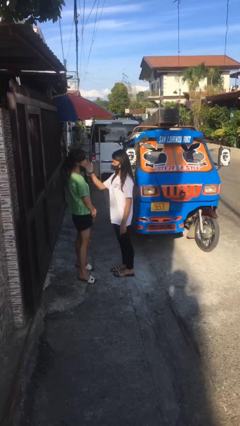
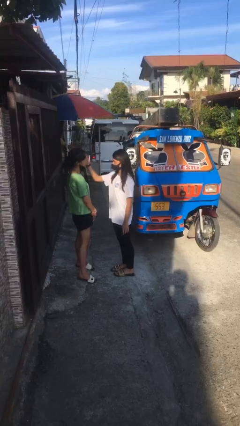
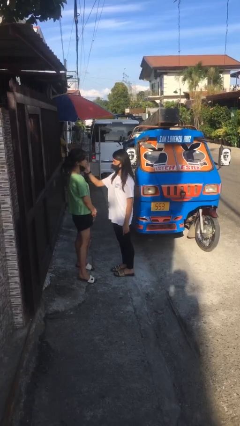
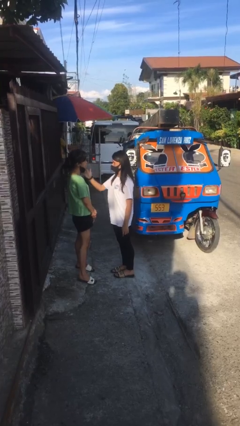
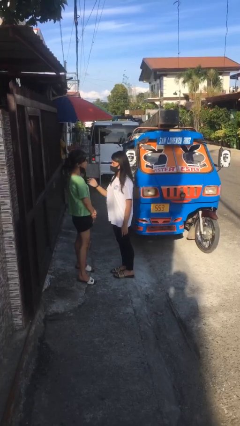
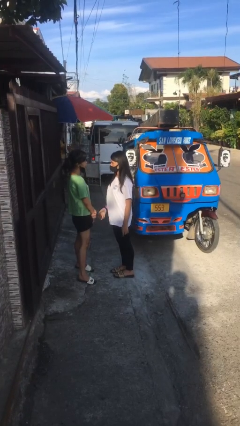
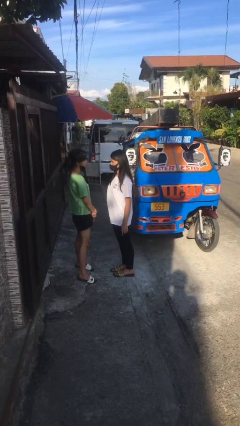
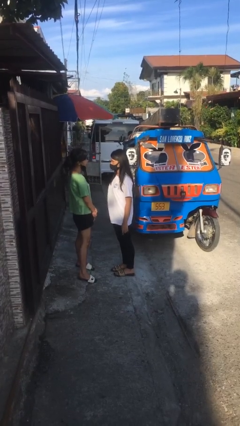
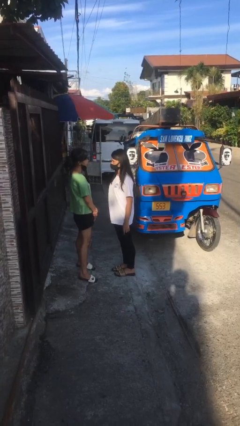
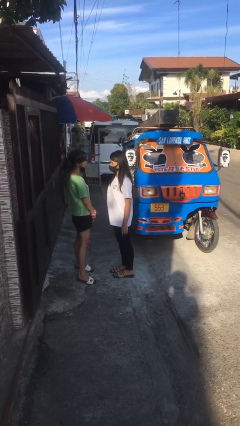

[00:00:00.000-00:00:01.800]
person touches face of person

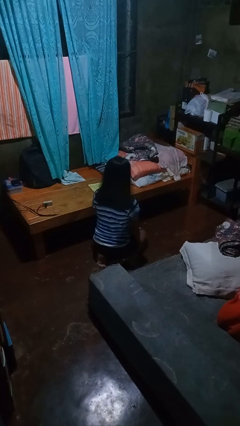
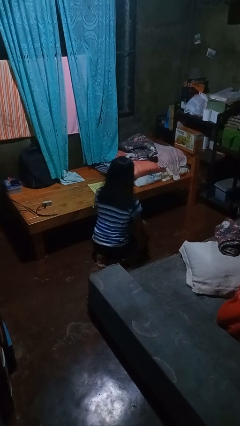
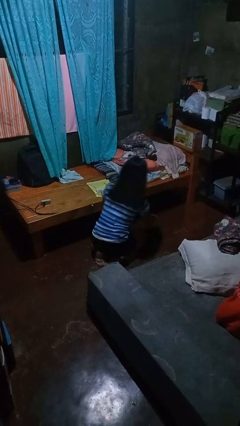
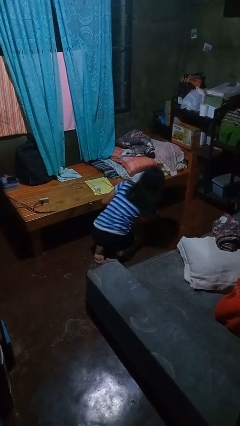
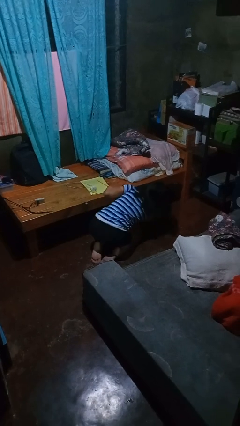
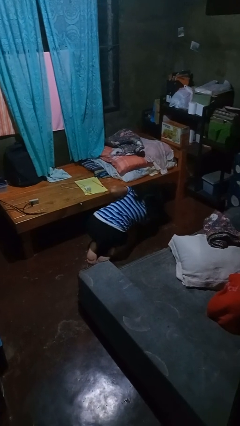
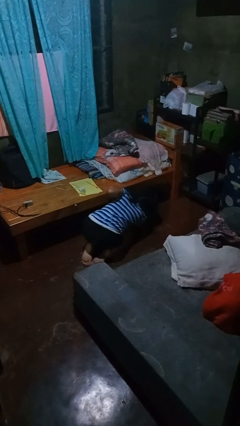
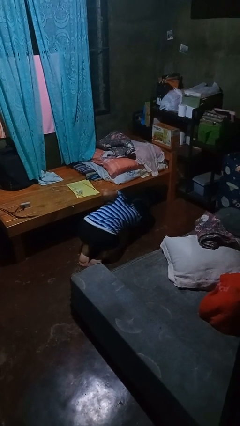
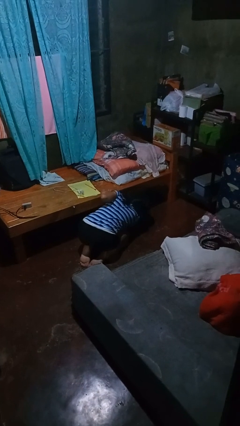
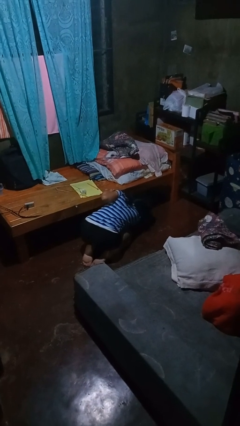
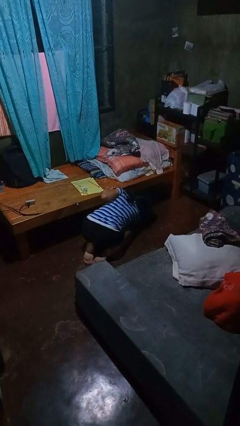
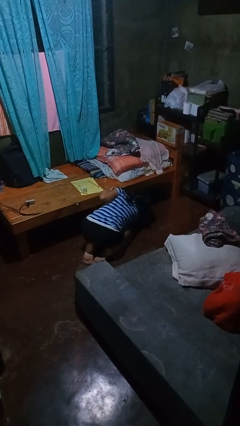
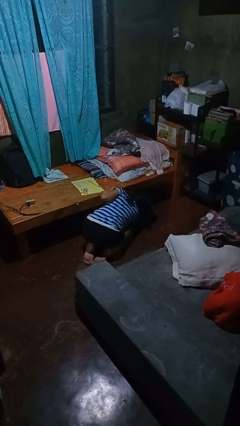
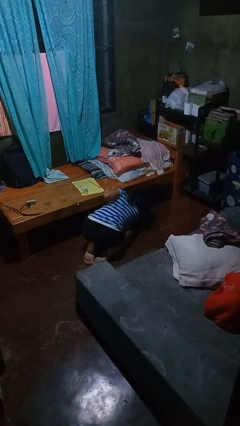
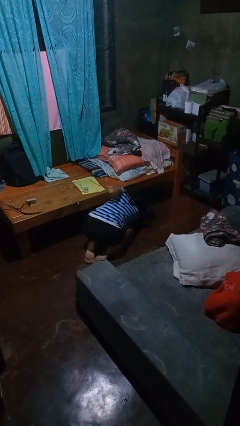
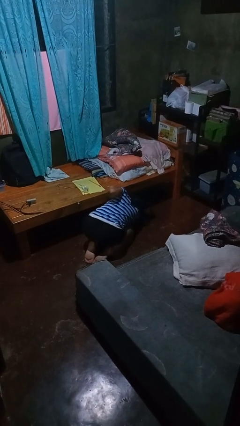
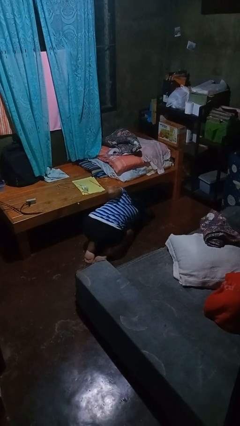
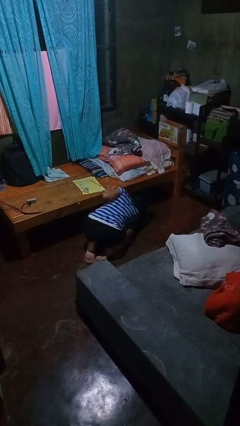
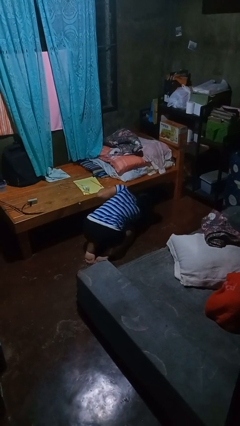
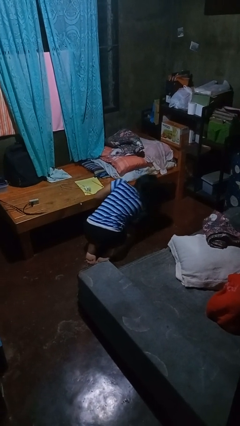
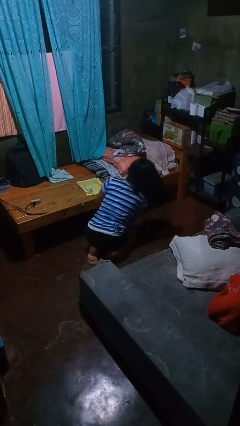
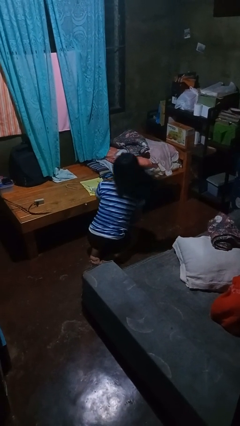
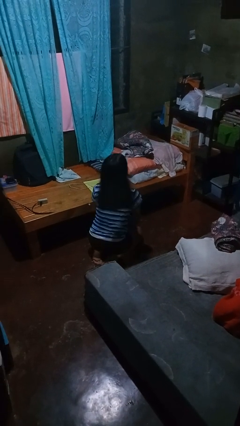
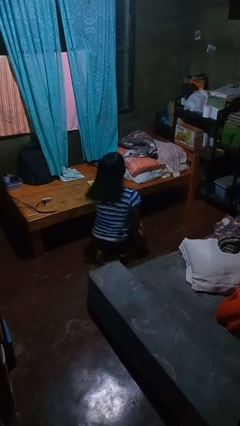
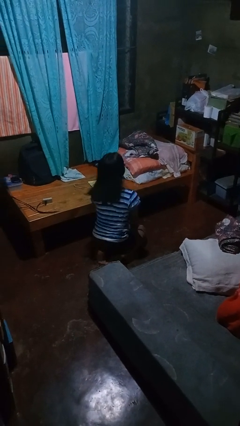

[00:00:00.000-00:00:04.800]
person searches under bed

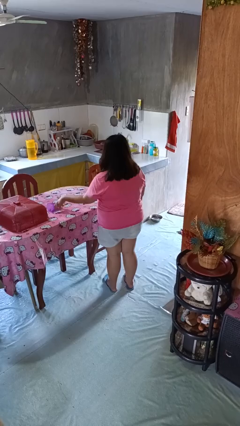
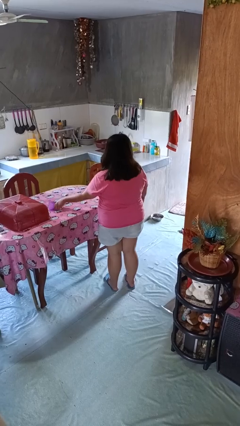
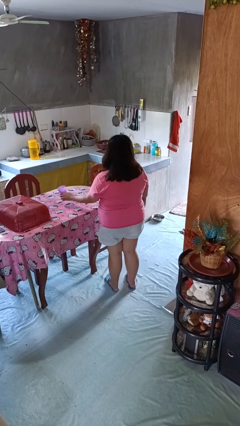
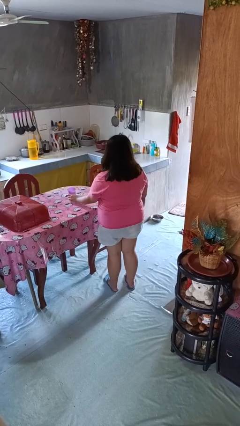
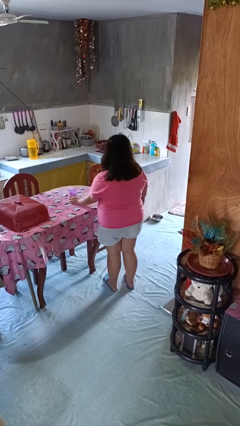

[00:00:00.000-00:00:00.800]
person sets upright glass

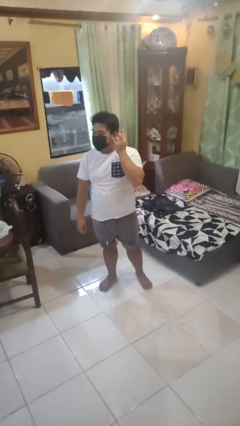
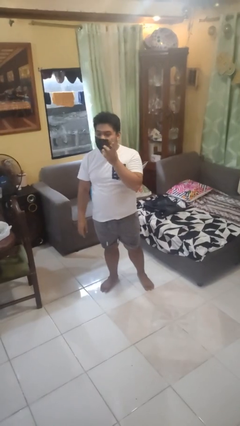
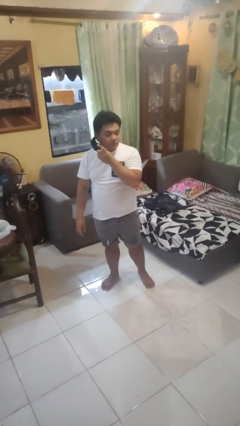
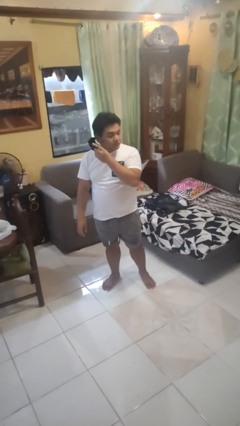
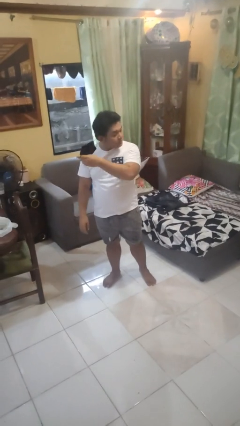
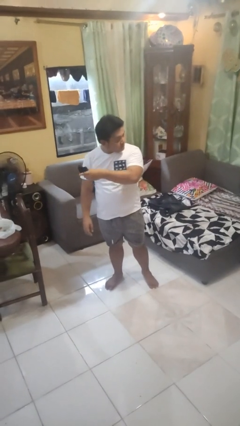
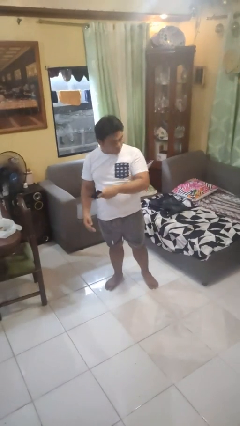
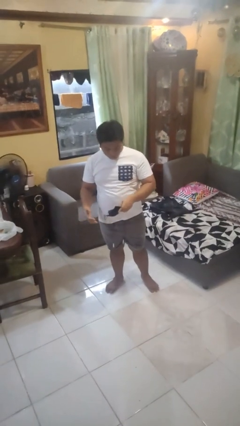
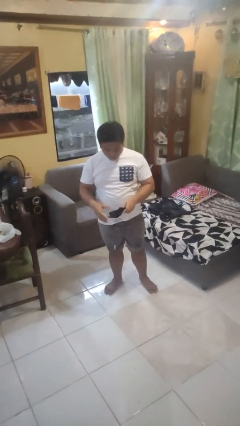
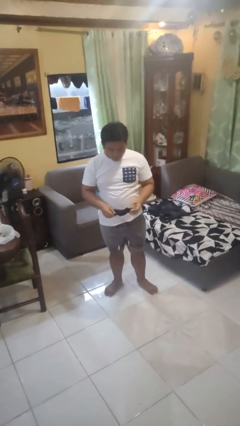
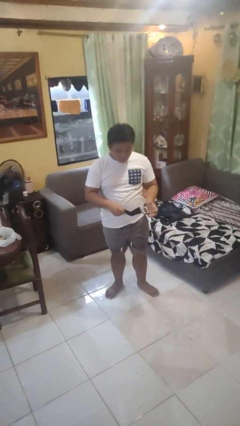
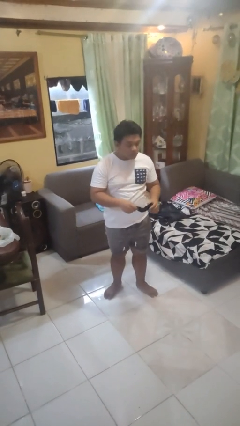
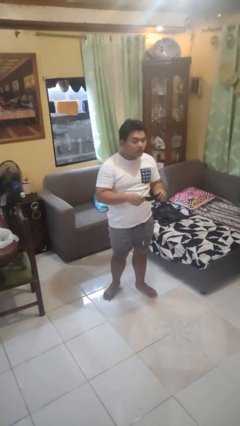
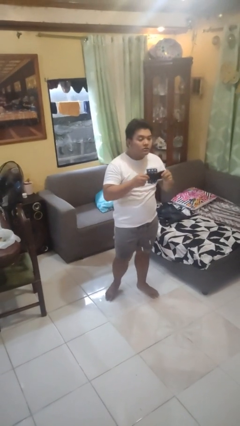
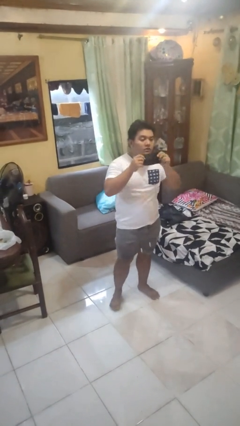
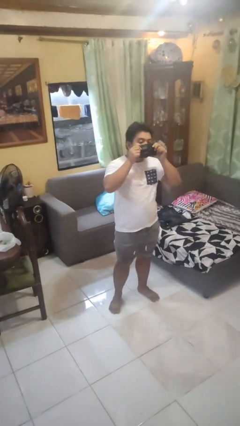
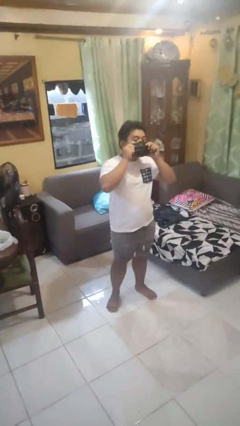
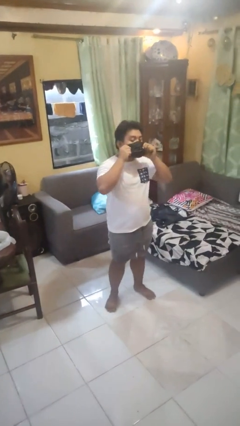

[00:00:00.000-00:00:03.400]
person takes off facemask

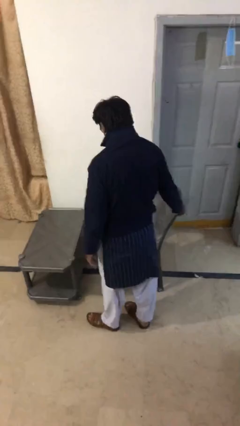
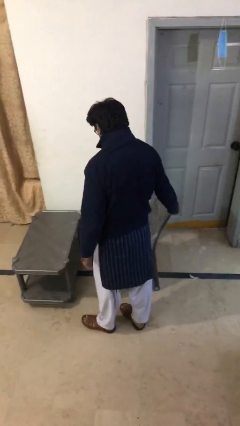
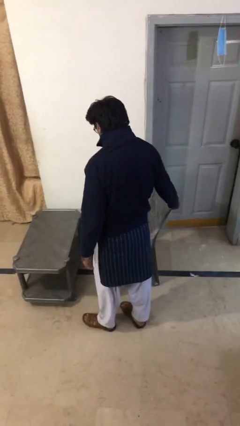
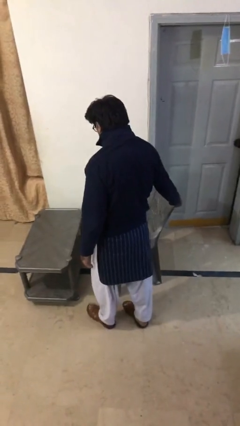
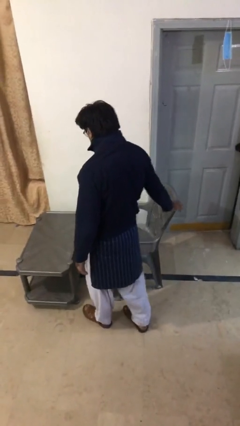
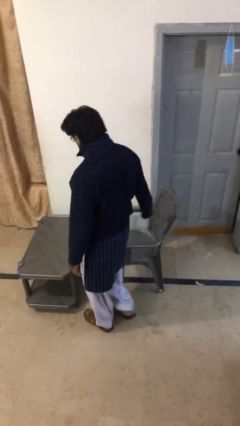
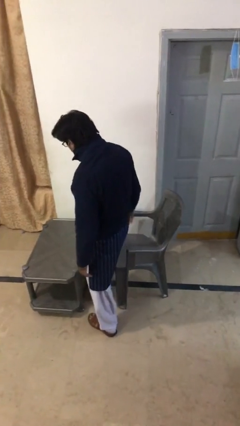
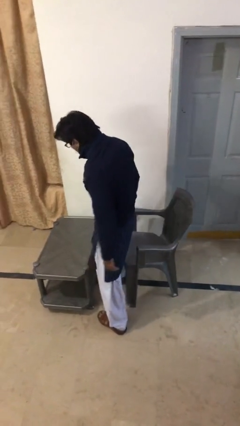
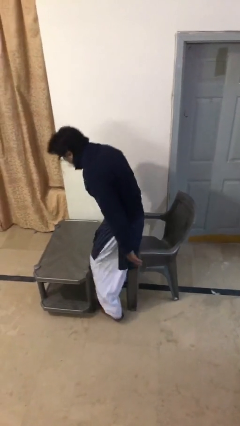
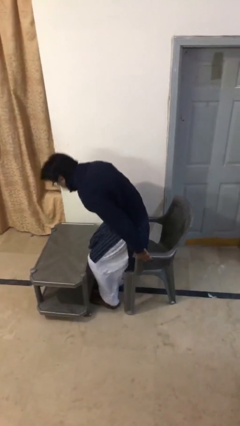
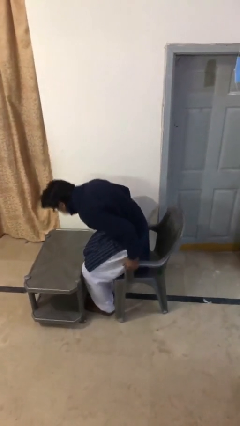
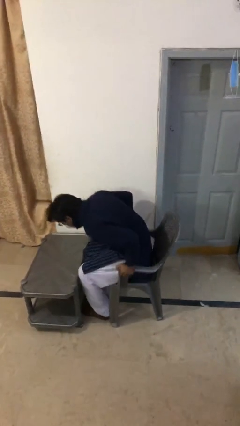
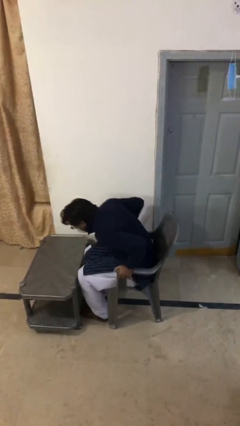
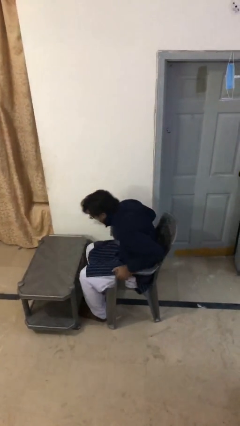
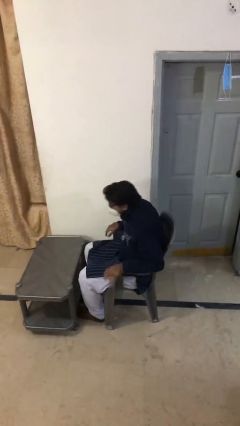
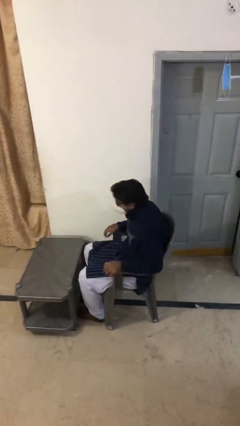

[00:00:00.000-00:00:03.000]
person sits down

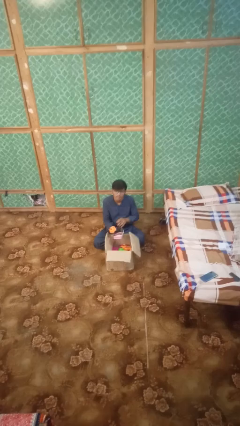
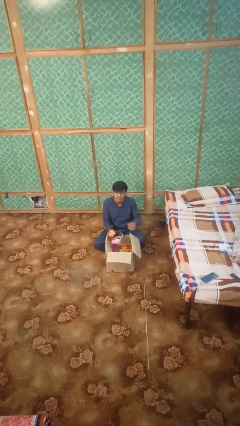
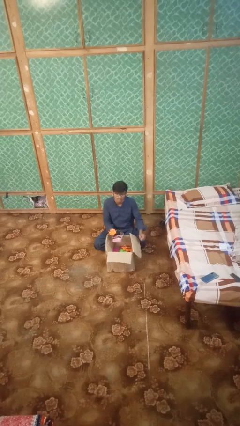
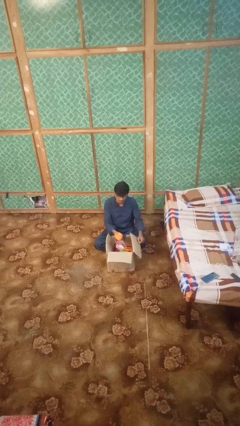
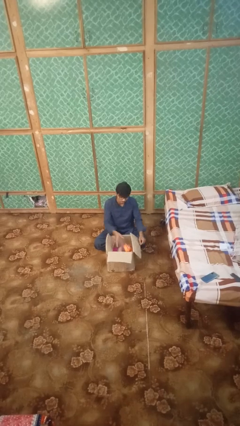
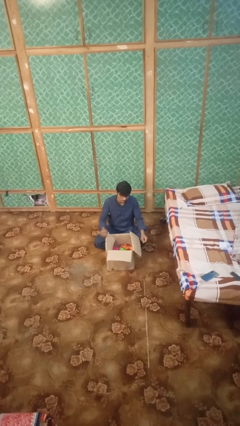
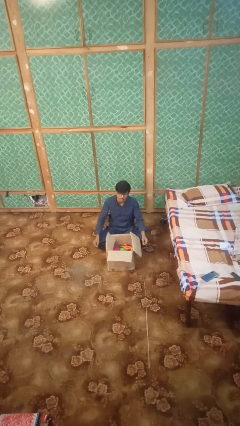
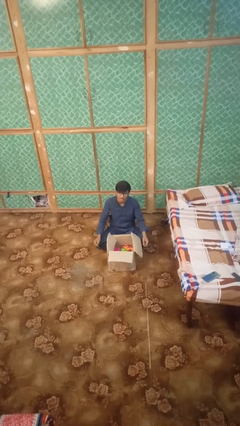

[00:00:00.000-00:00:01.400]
person puts object into box

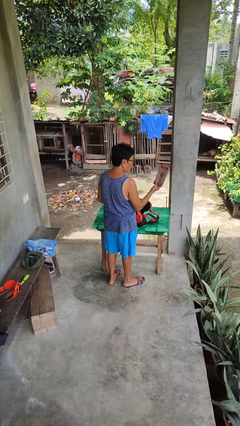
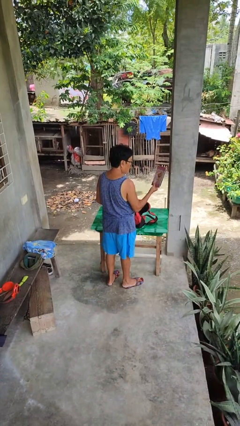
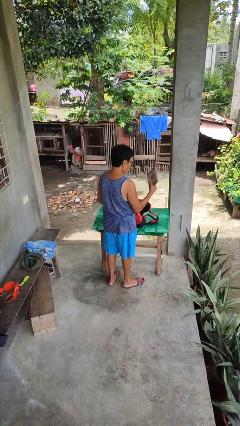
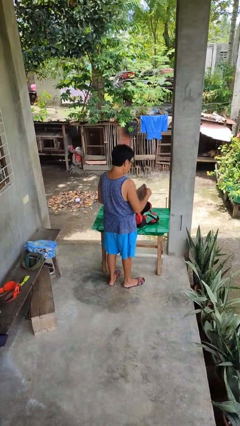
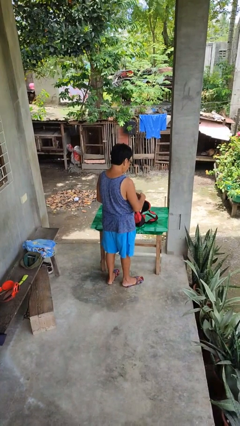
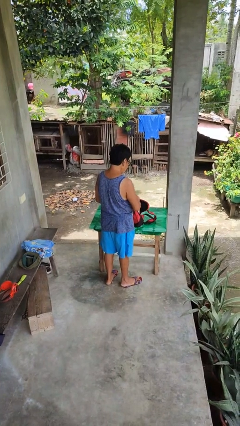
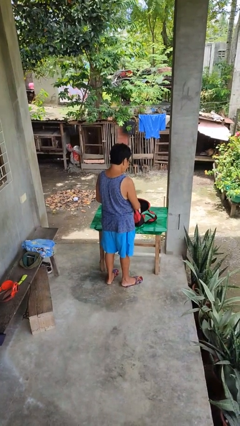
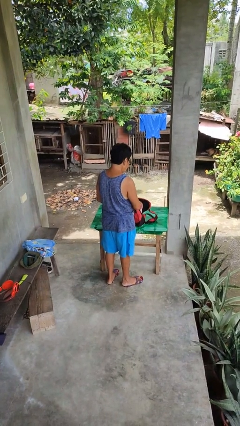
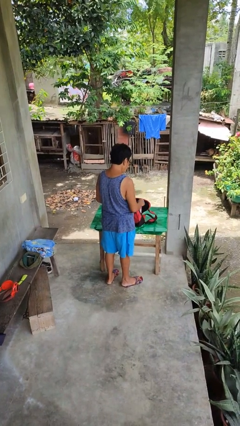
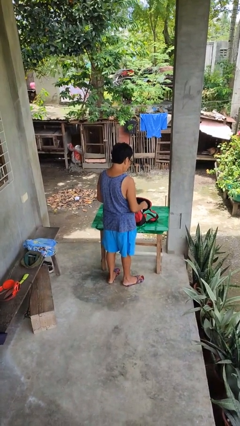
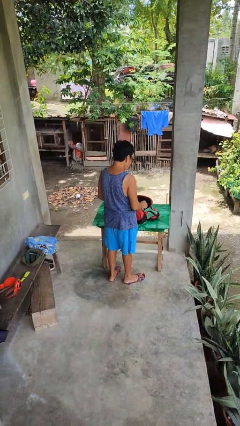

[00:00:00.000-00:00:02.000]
person puts object into backpack
